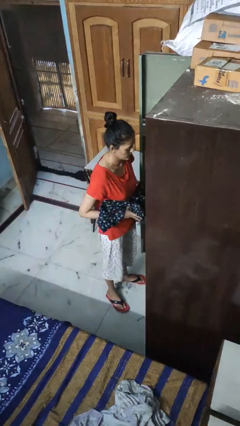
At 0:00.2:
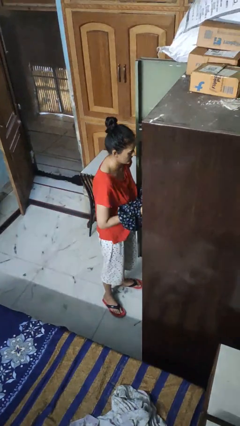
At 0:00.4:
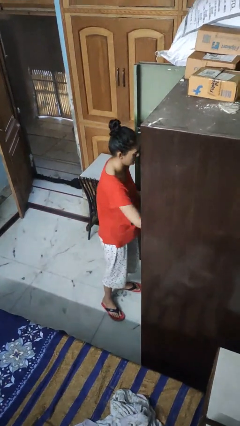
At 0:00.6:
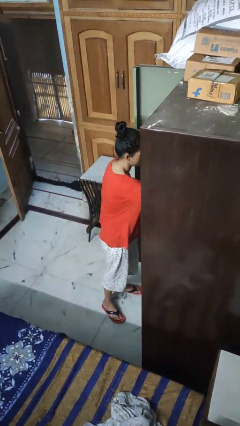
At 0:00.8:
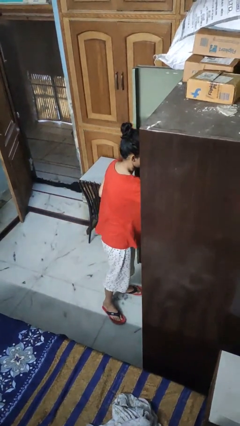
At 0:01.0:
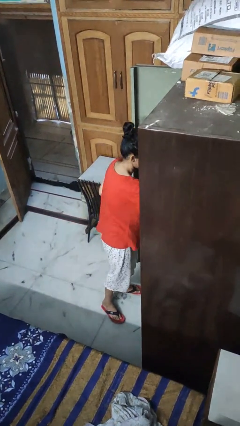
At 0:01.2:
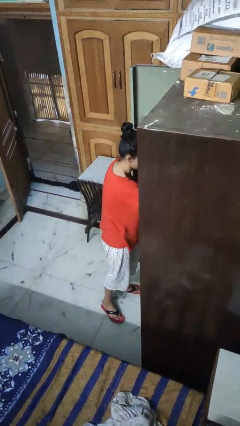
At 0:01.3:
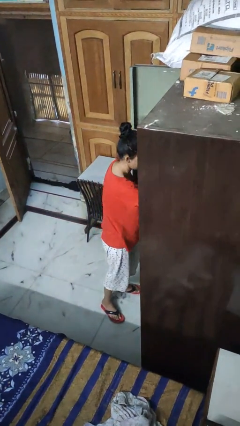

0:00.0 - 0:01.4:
person puts clothes into dresser

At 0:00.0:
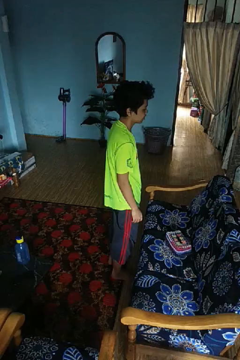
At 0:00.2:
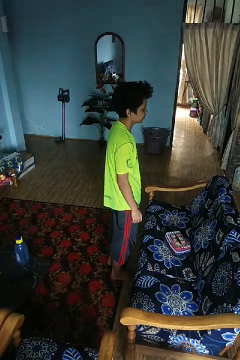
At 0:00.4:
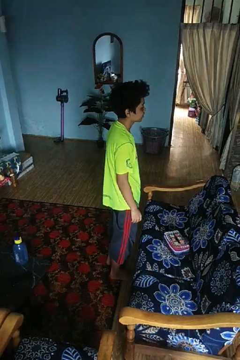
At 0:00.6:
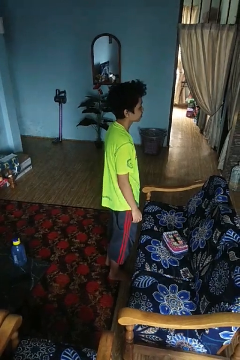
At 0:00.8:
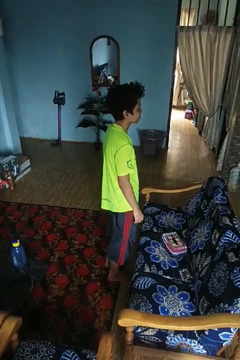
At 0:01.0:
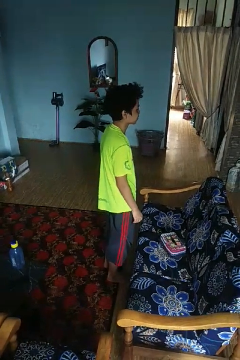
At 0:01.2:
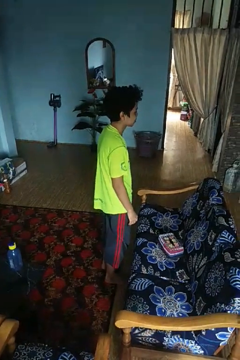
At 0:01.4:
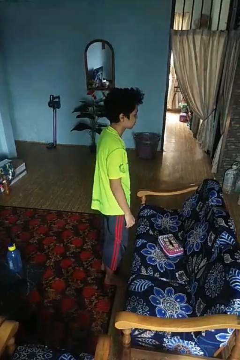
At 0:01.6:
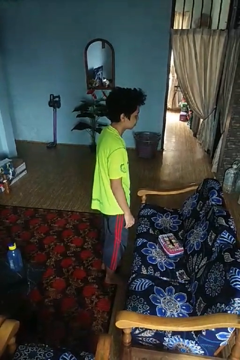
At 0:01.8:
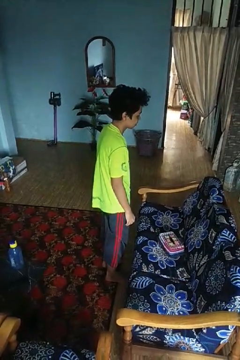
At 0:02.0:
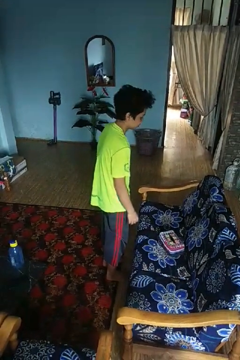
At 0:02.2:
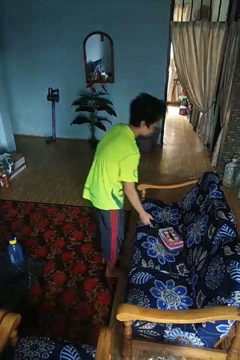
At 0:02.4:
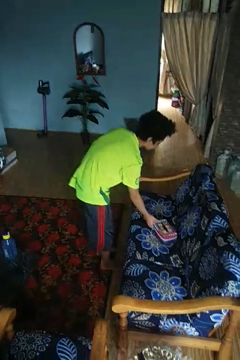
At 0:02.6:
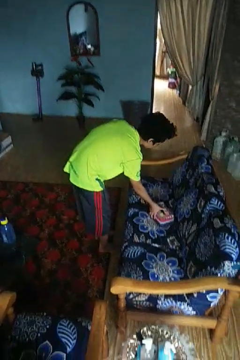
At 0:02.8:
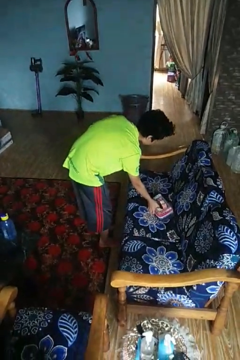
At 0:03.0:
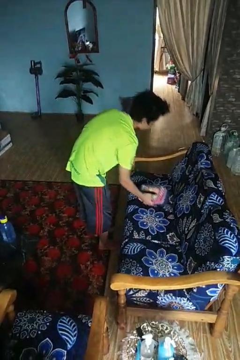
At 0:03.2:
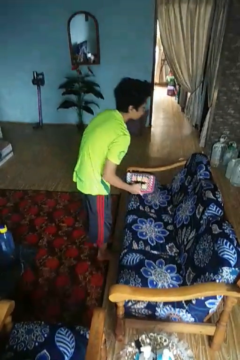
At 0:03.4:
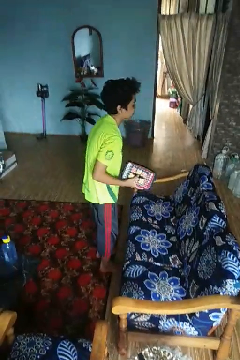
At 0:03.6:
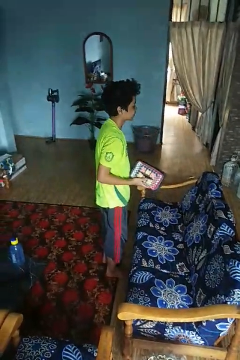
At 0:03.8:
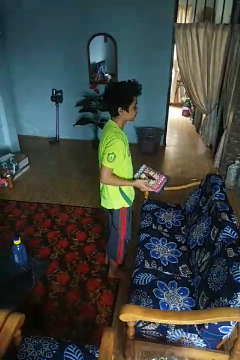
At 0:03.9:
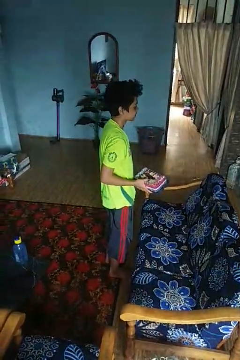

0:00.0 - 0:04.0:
person picks up object from couch

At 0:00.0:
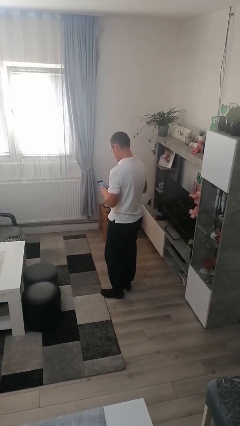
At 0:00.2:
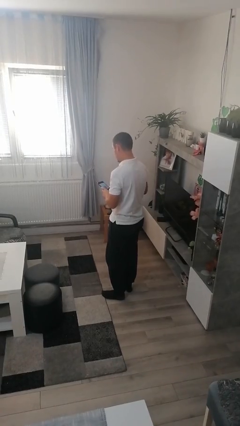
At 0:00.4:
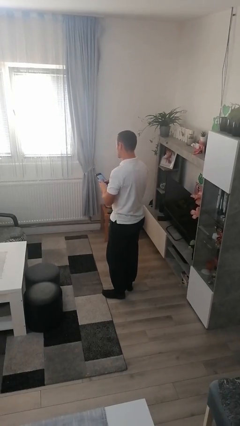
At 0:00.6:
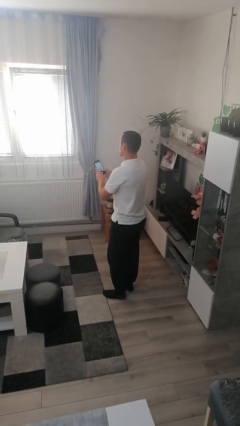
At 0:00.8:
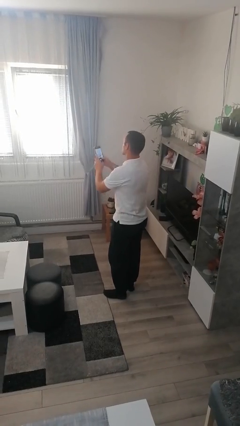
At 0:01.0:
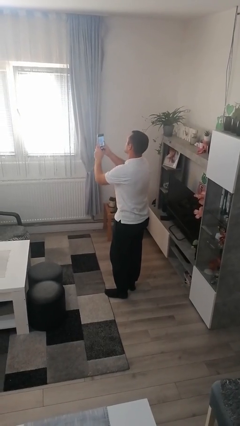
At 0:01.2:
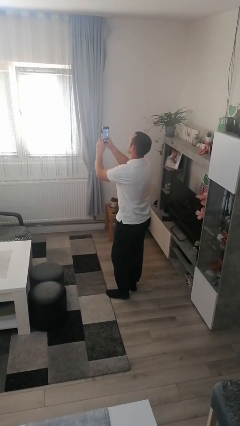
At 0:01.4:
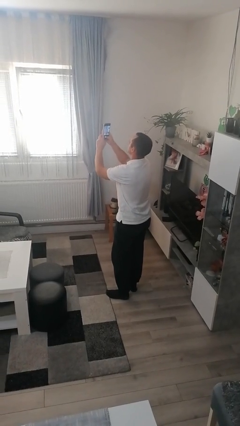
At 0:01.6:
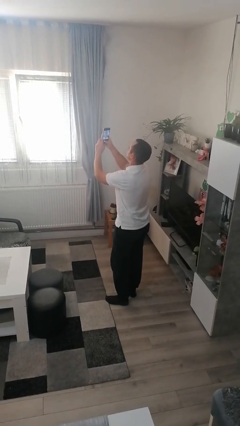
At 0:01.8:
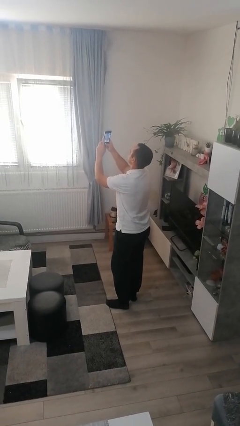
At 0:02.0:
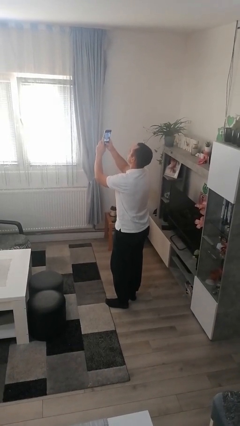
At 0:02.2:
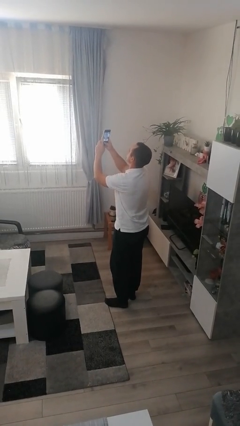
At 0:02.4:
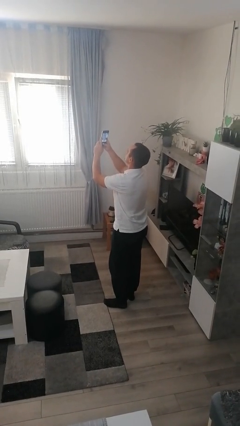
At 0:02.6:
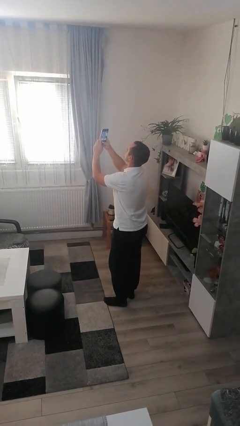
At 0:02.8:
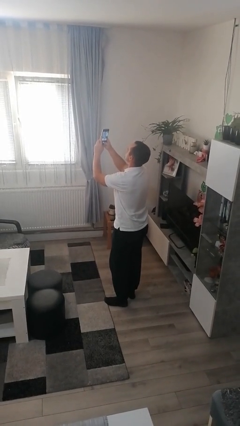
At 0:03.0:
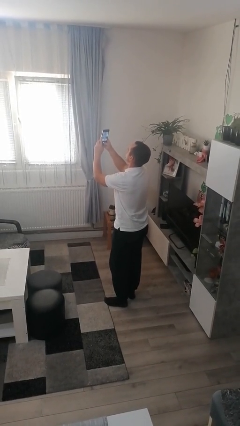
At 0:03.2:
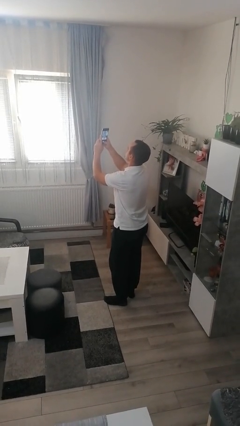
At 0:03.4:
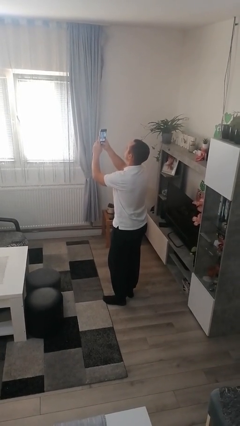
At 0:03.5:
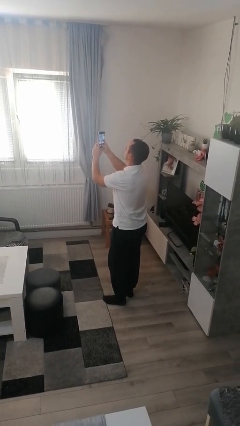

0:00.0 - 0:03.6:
person takes selfie

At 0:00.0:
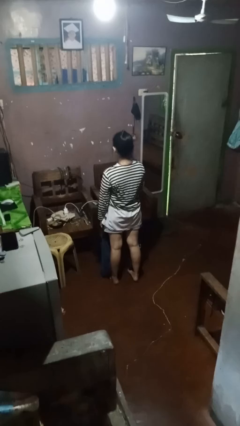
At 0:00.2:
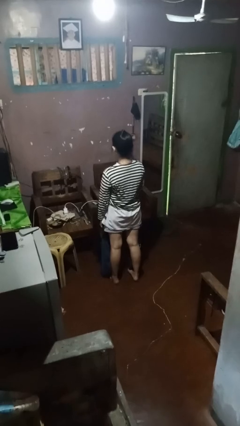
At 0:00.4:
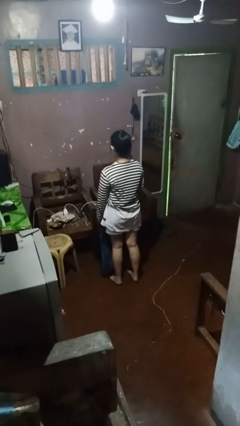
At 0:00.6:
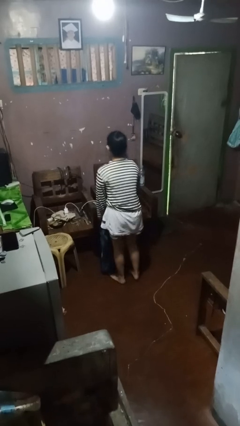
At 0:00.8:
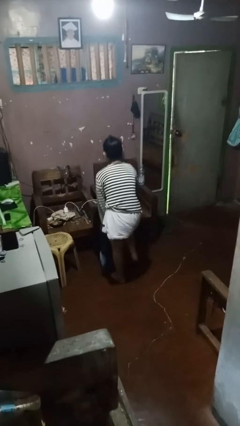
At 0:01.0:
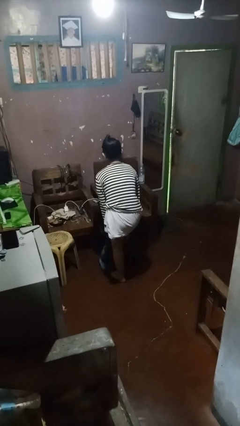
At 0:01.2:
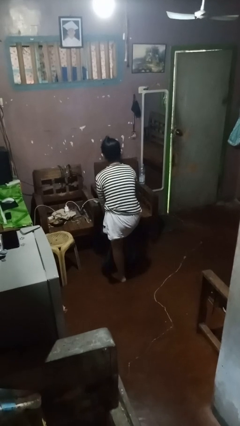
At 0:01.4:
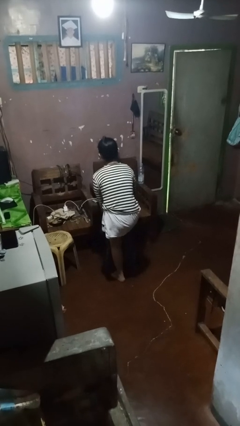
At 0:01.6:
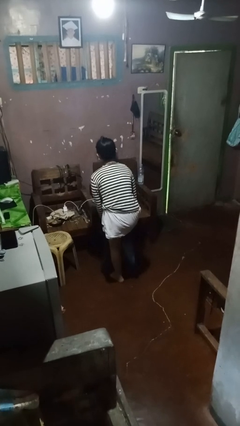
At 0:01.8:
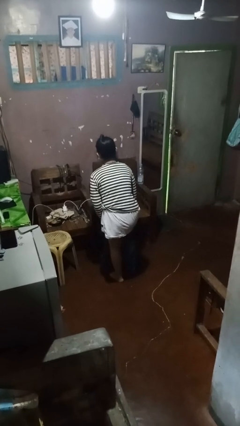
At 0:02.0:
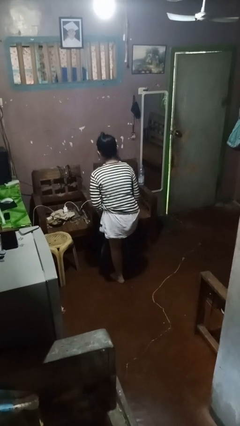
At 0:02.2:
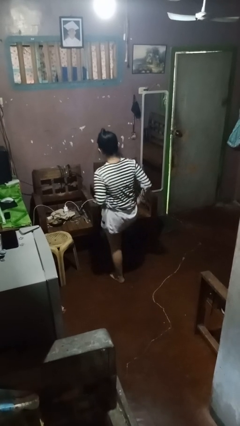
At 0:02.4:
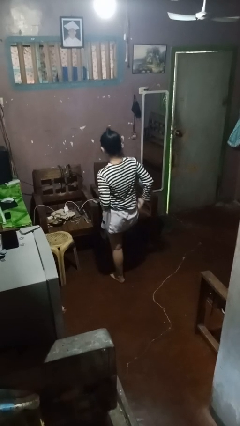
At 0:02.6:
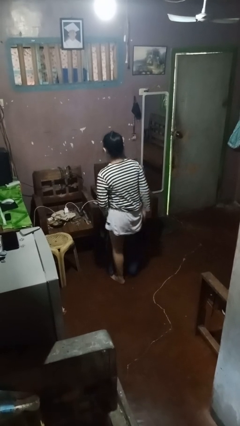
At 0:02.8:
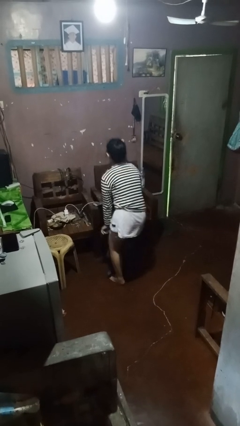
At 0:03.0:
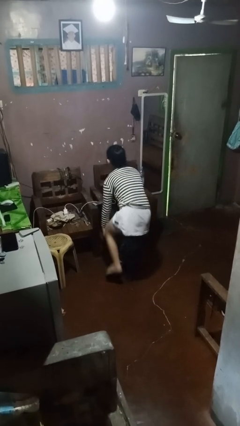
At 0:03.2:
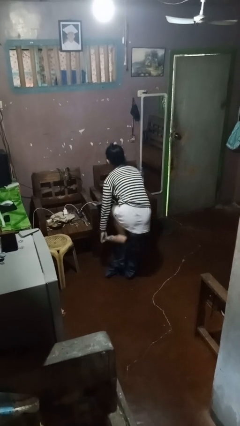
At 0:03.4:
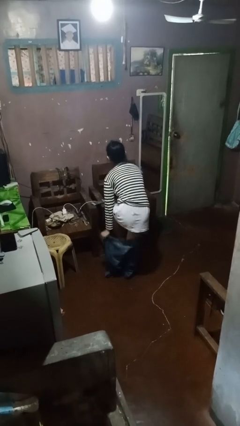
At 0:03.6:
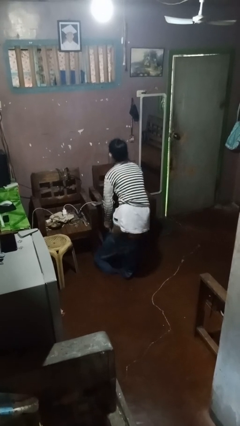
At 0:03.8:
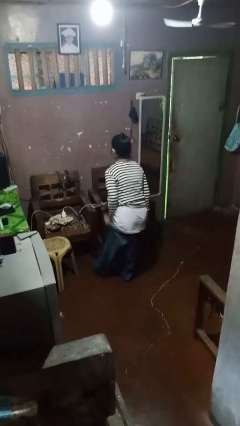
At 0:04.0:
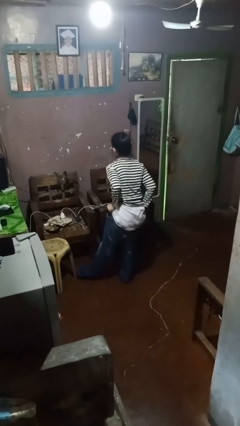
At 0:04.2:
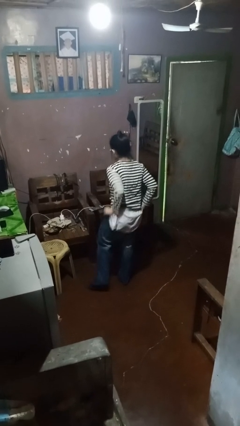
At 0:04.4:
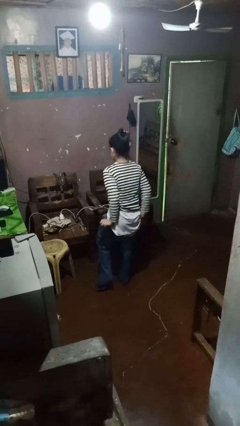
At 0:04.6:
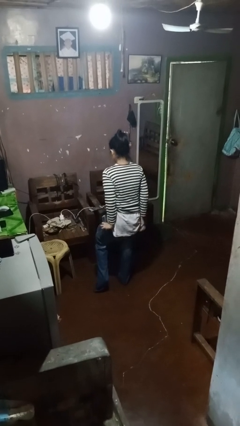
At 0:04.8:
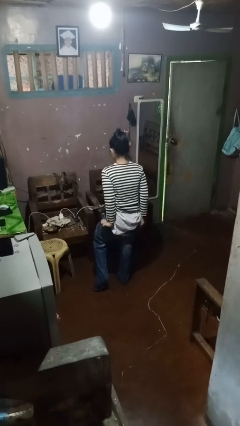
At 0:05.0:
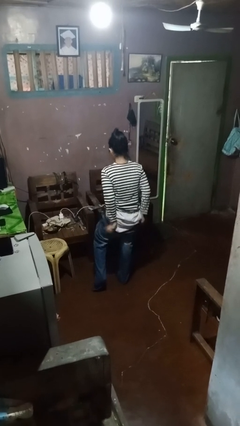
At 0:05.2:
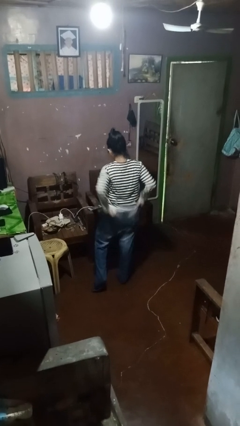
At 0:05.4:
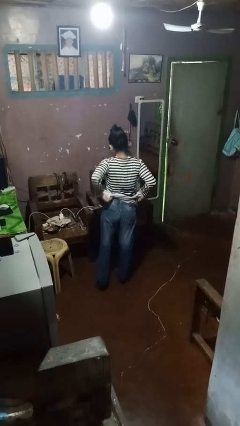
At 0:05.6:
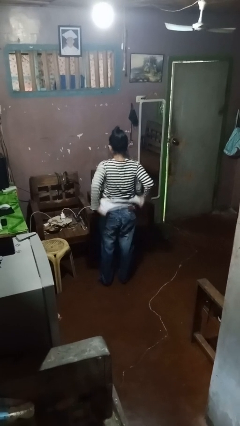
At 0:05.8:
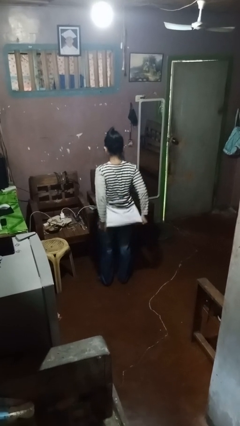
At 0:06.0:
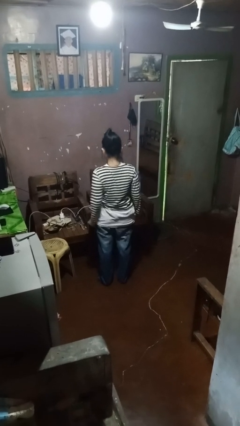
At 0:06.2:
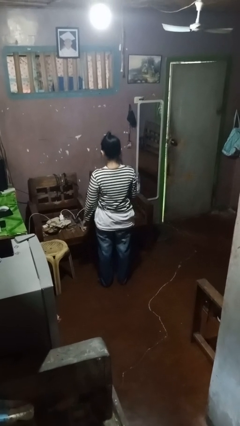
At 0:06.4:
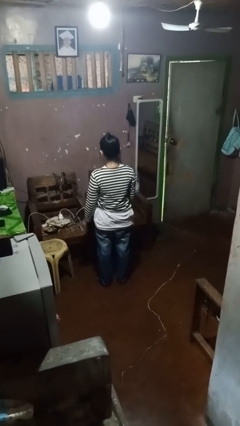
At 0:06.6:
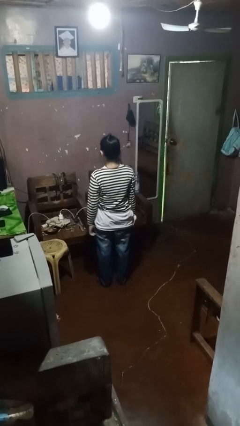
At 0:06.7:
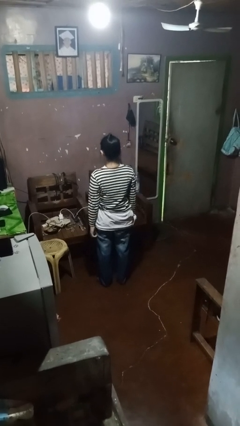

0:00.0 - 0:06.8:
person puts on pants

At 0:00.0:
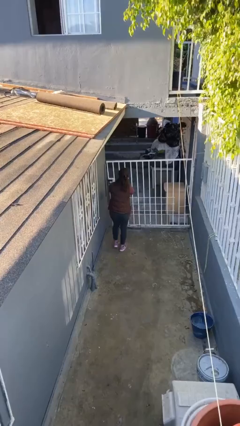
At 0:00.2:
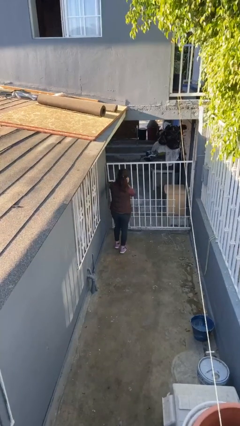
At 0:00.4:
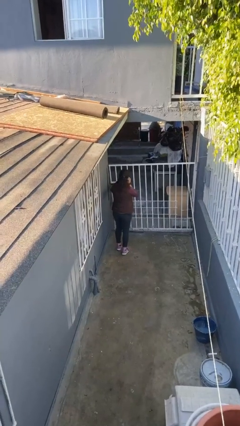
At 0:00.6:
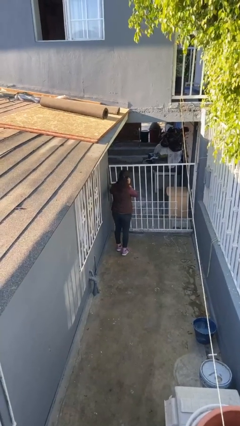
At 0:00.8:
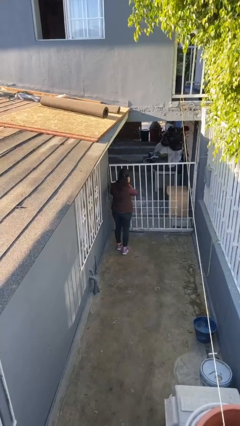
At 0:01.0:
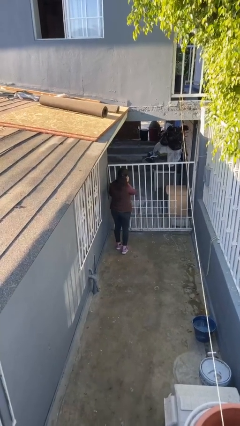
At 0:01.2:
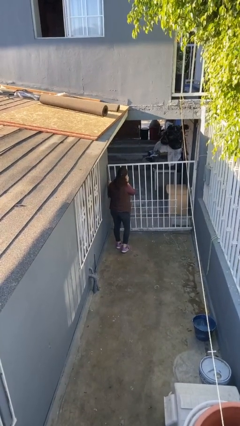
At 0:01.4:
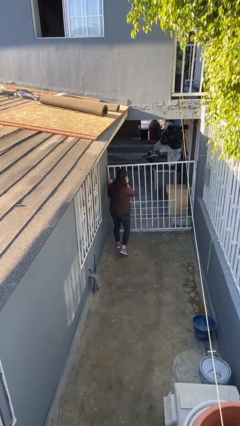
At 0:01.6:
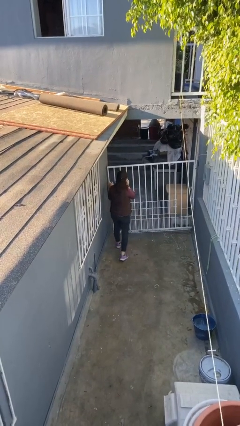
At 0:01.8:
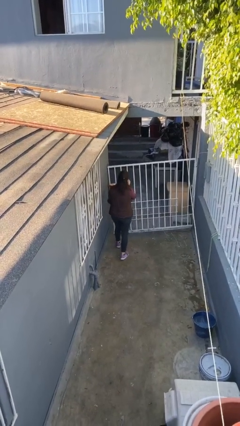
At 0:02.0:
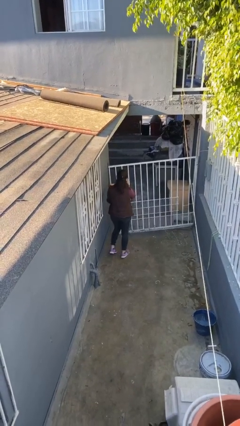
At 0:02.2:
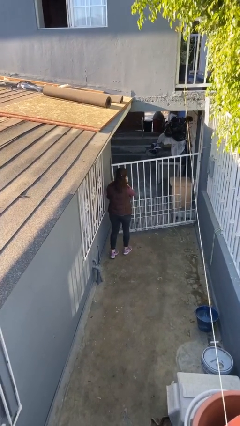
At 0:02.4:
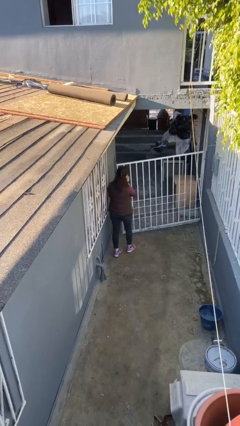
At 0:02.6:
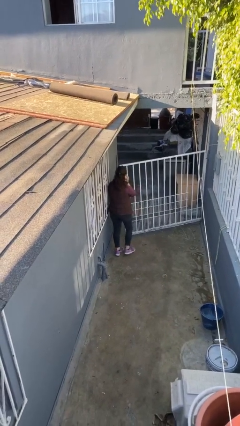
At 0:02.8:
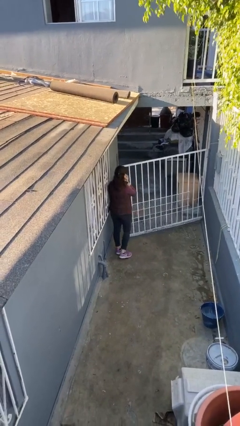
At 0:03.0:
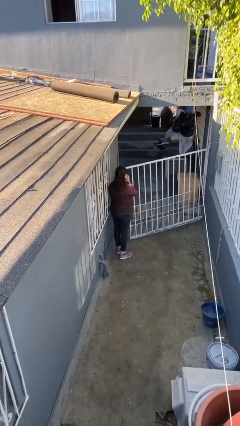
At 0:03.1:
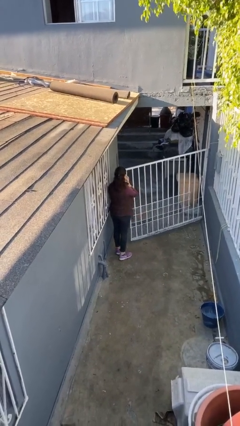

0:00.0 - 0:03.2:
person opens facility door
